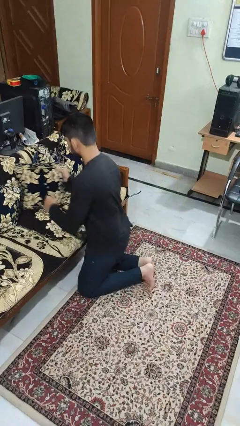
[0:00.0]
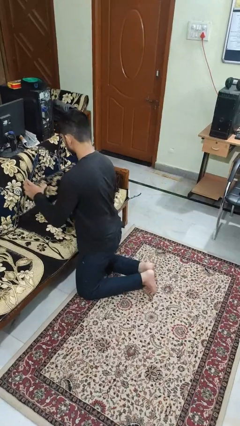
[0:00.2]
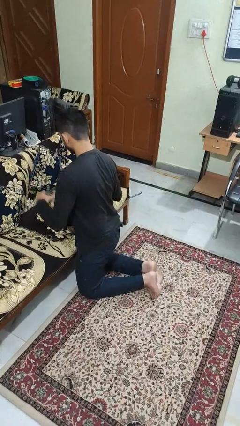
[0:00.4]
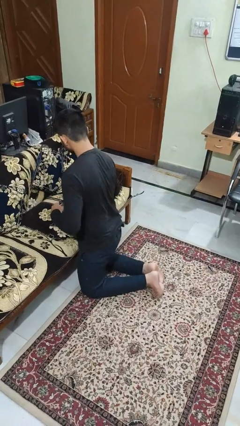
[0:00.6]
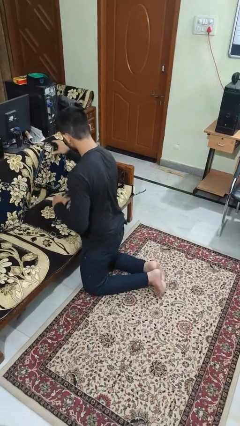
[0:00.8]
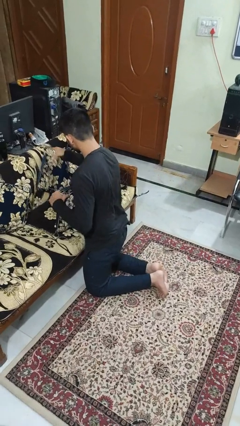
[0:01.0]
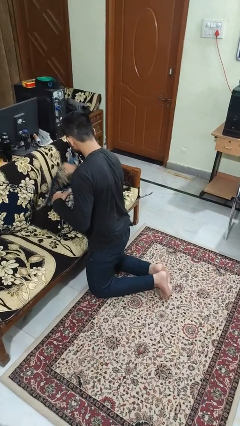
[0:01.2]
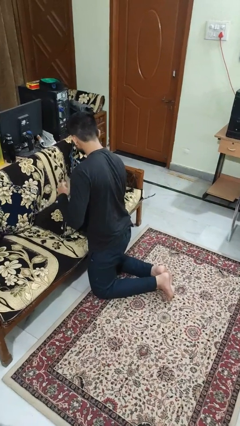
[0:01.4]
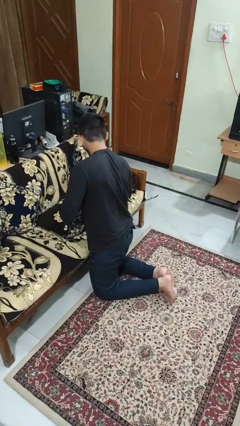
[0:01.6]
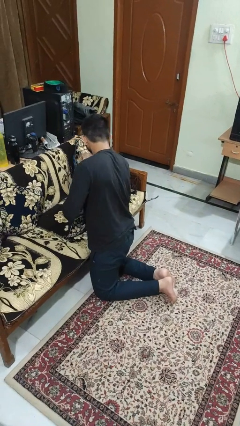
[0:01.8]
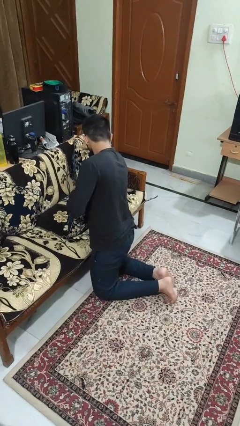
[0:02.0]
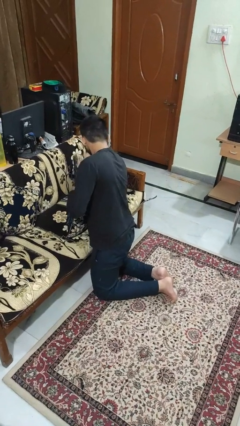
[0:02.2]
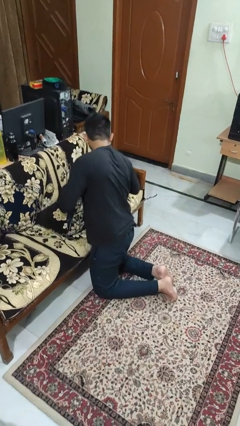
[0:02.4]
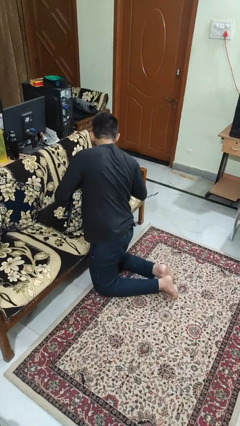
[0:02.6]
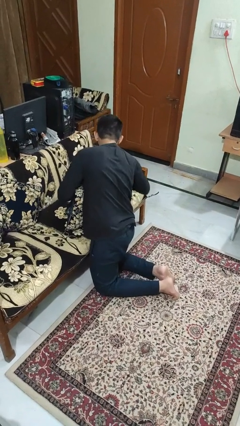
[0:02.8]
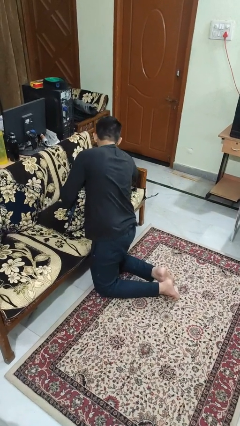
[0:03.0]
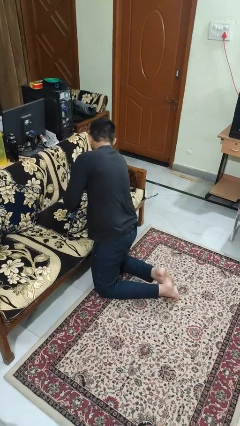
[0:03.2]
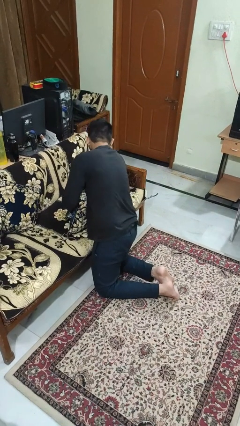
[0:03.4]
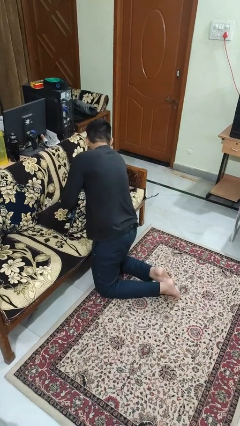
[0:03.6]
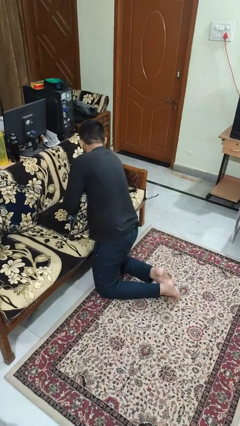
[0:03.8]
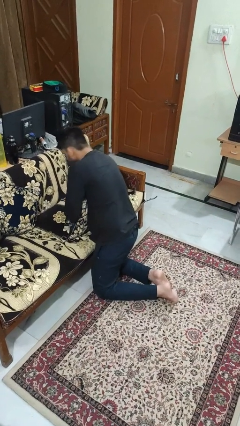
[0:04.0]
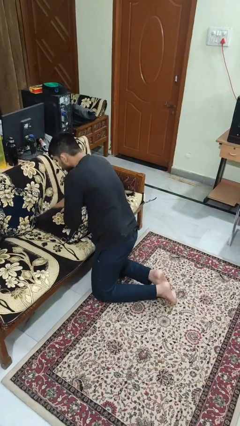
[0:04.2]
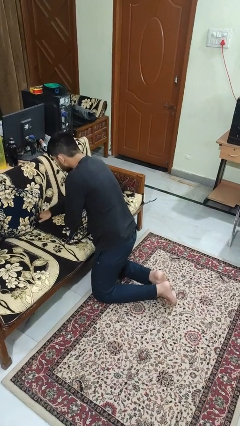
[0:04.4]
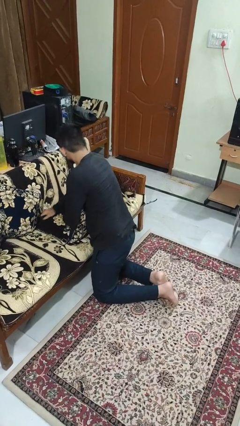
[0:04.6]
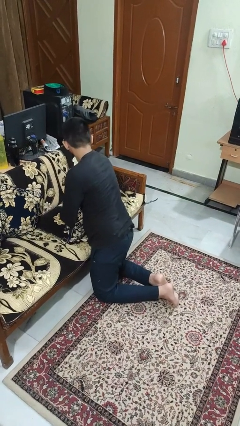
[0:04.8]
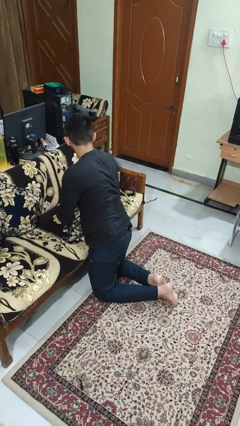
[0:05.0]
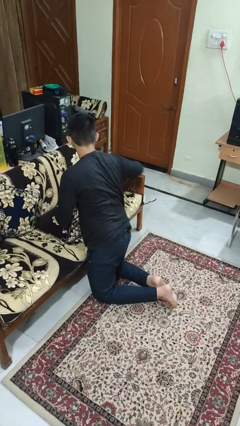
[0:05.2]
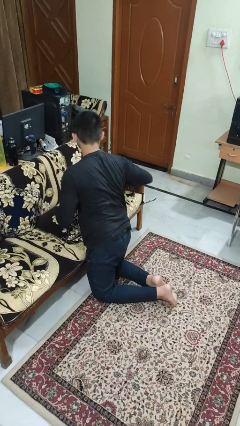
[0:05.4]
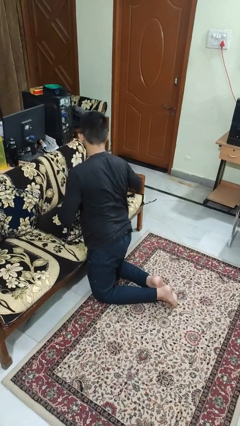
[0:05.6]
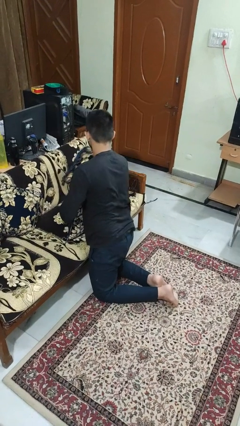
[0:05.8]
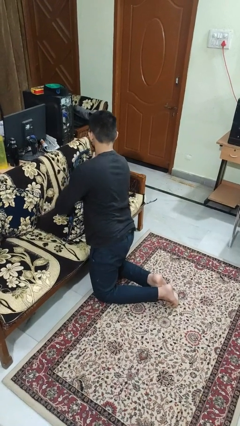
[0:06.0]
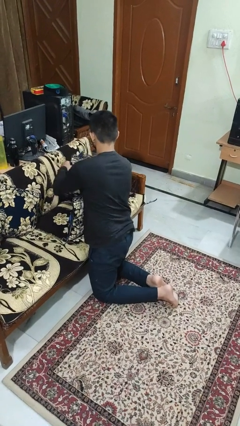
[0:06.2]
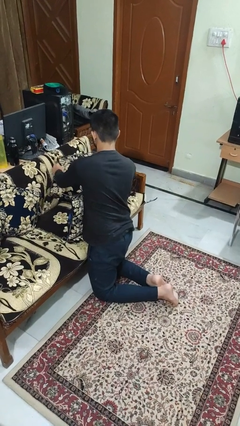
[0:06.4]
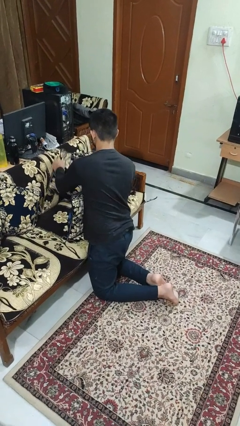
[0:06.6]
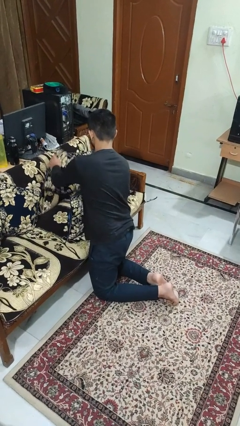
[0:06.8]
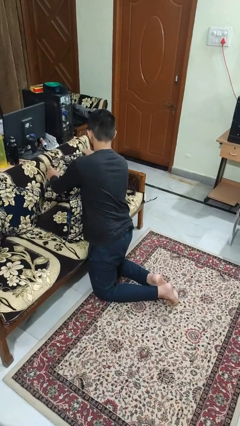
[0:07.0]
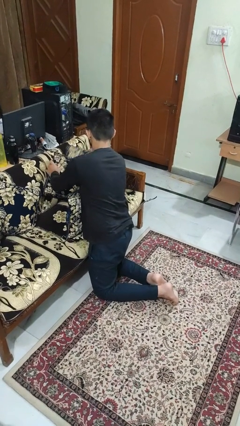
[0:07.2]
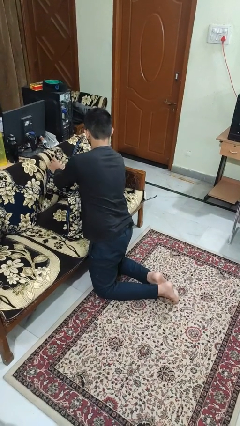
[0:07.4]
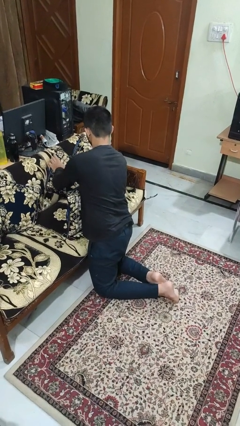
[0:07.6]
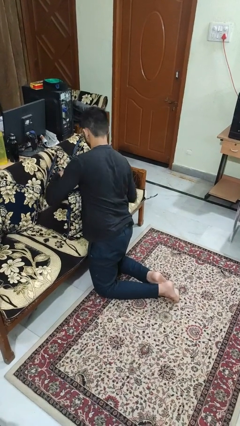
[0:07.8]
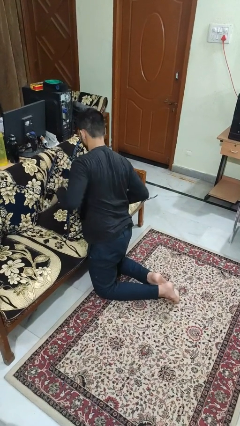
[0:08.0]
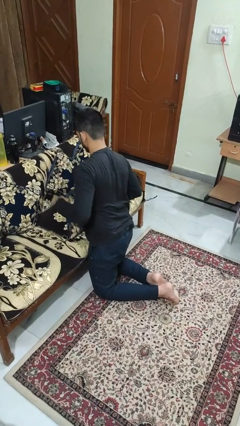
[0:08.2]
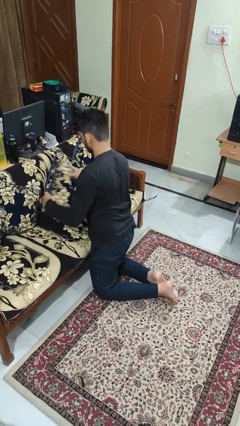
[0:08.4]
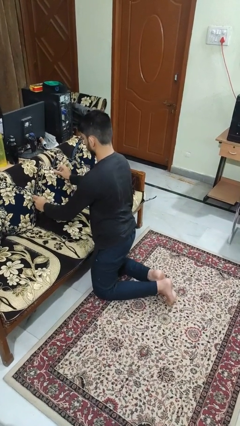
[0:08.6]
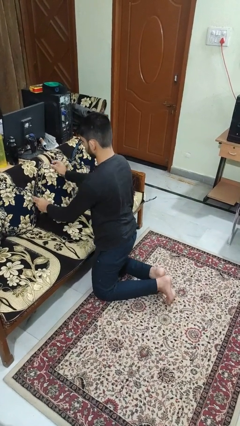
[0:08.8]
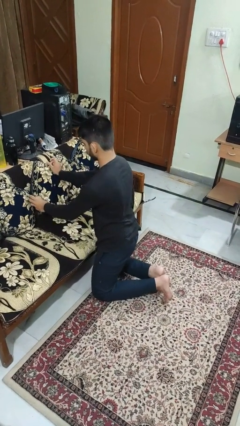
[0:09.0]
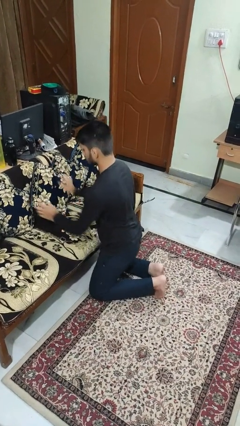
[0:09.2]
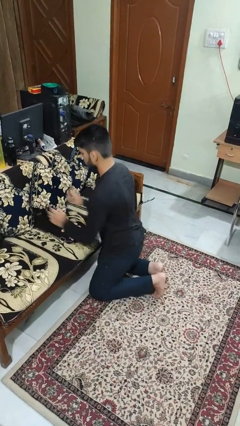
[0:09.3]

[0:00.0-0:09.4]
person searches in couch

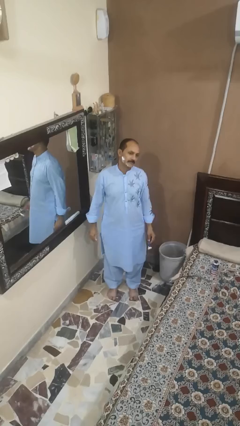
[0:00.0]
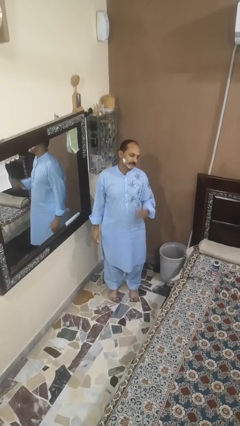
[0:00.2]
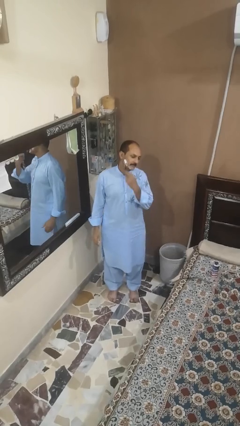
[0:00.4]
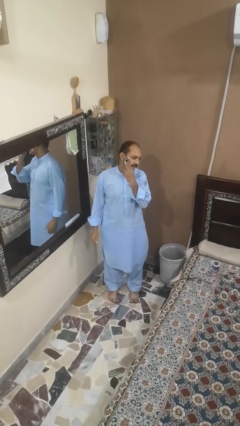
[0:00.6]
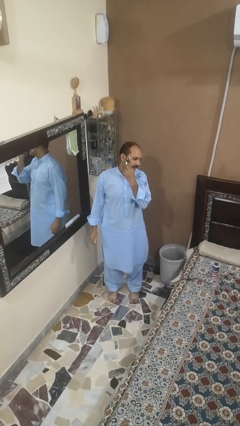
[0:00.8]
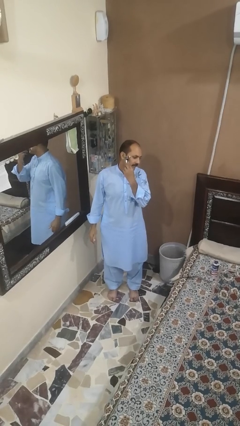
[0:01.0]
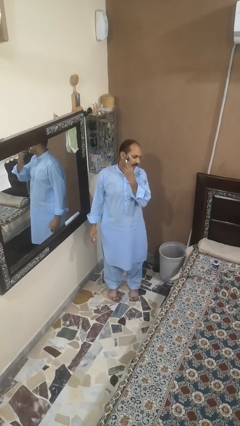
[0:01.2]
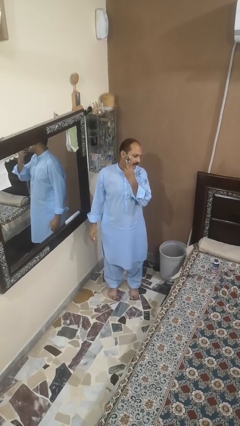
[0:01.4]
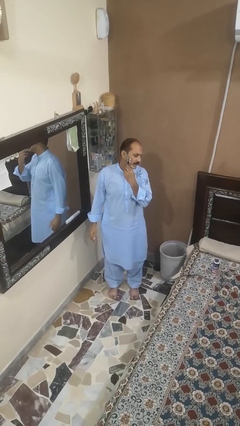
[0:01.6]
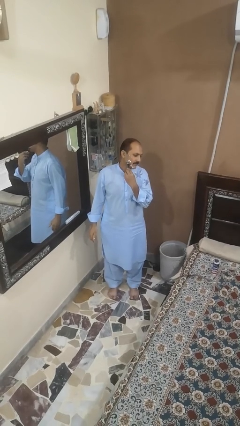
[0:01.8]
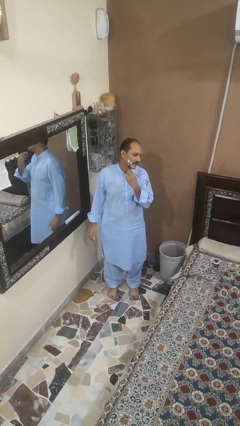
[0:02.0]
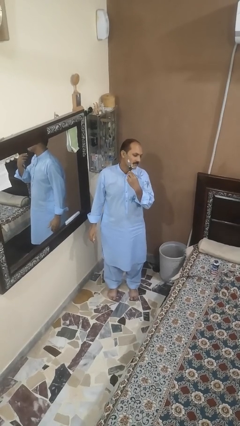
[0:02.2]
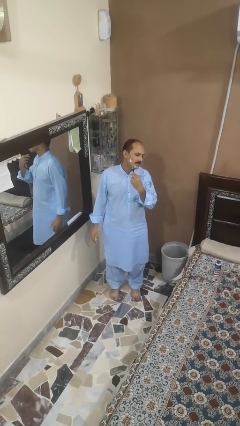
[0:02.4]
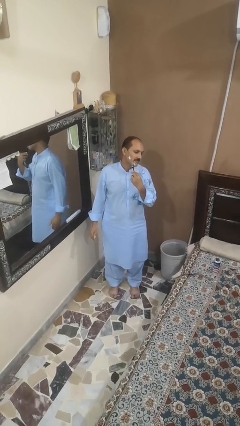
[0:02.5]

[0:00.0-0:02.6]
person shaves face

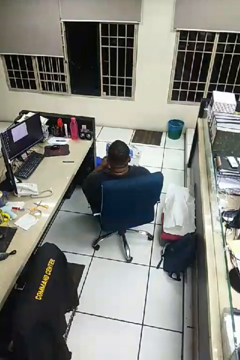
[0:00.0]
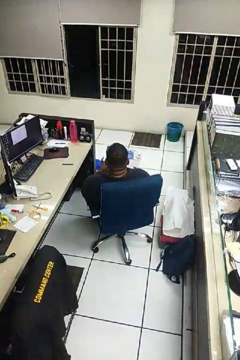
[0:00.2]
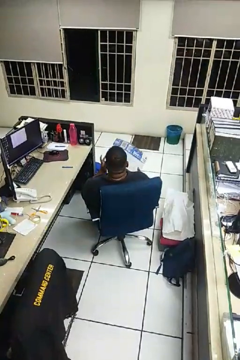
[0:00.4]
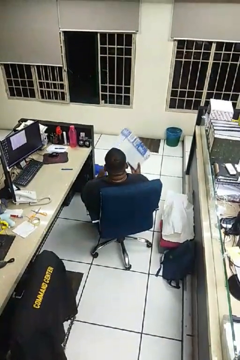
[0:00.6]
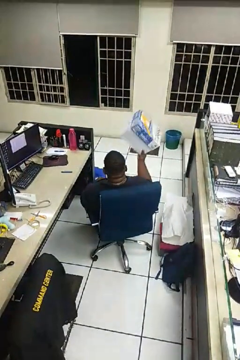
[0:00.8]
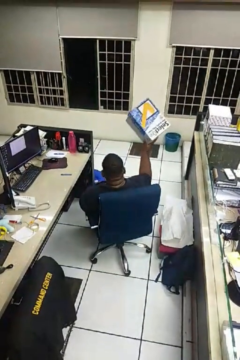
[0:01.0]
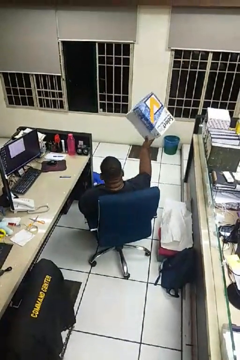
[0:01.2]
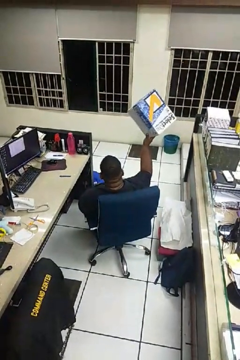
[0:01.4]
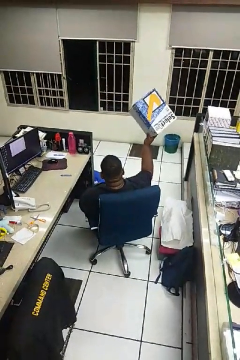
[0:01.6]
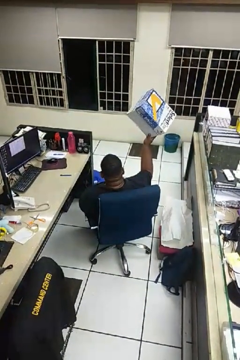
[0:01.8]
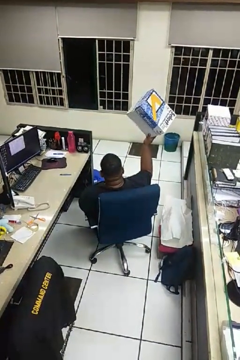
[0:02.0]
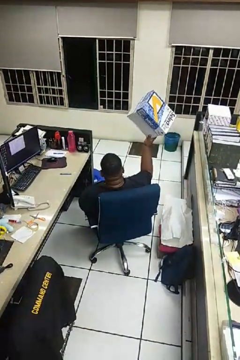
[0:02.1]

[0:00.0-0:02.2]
person holds object above head

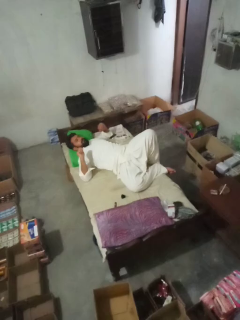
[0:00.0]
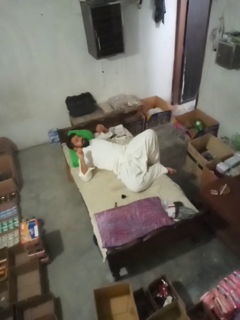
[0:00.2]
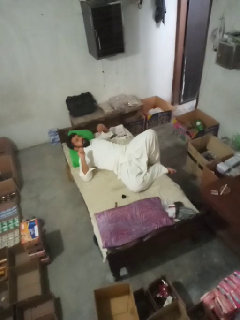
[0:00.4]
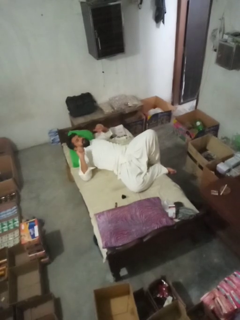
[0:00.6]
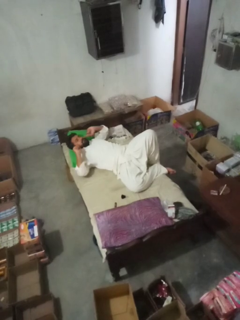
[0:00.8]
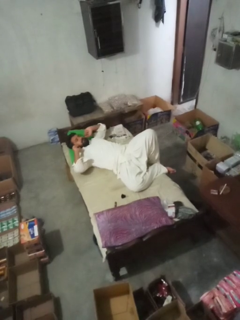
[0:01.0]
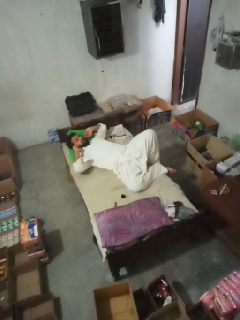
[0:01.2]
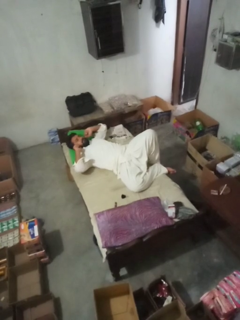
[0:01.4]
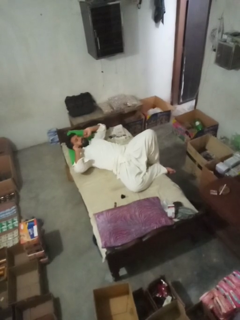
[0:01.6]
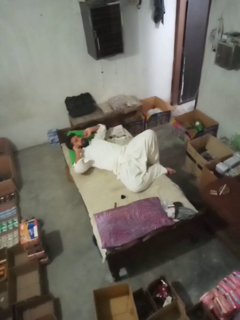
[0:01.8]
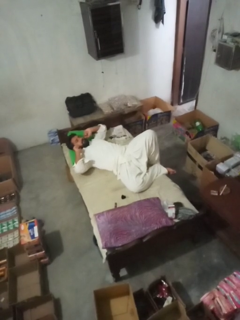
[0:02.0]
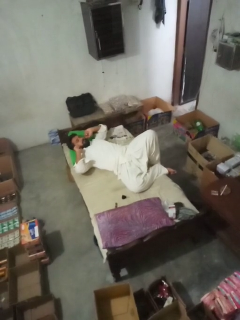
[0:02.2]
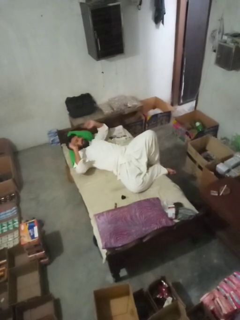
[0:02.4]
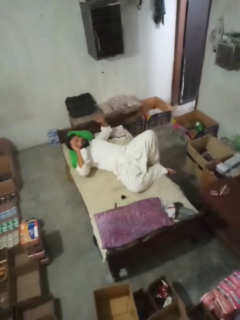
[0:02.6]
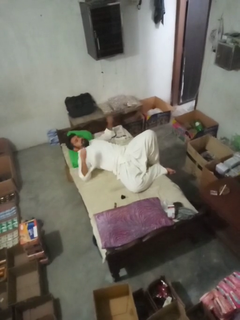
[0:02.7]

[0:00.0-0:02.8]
person puts fingers in ear

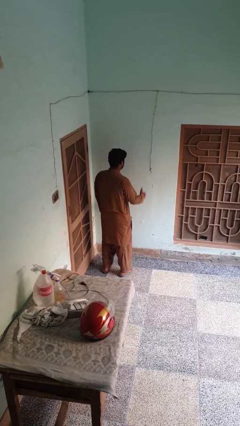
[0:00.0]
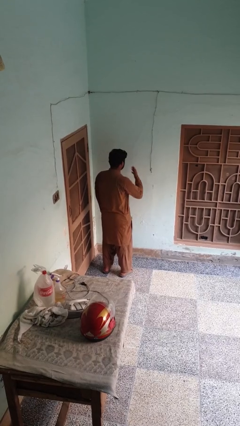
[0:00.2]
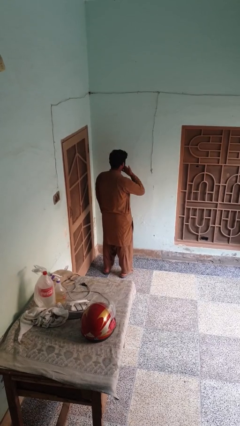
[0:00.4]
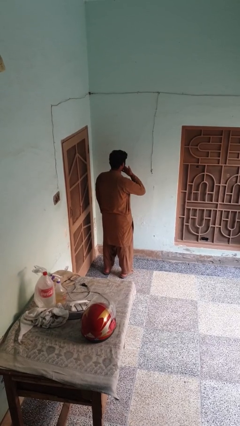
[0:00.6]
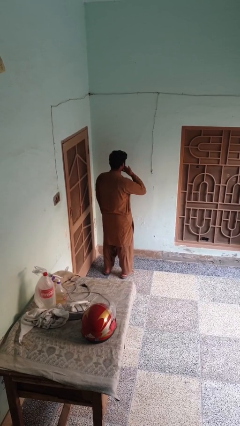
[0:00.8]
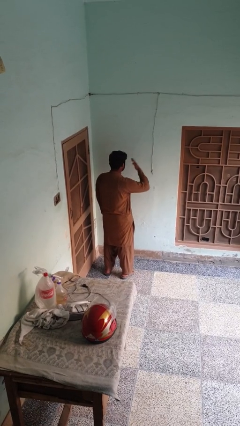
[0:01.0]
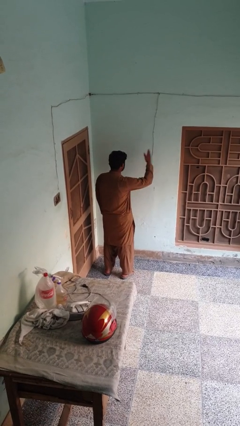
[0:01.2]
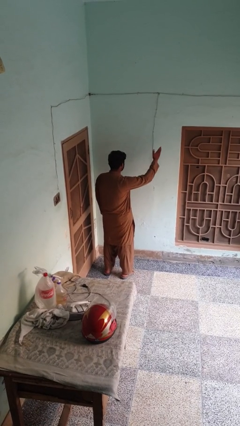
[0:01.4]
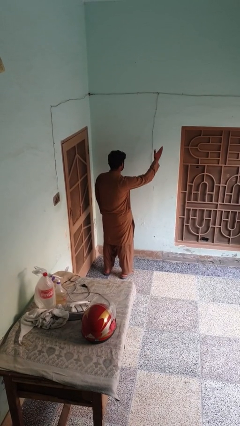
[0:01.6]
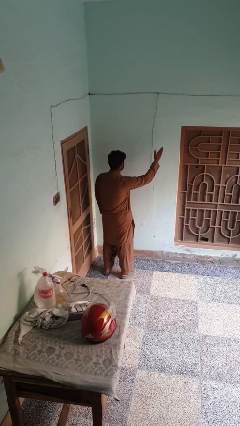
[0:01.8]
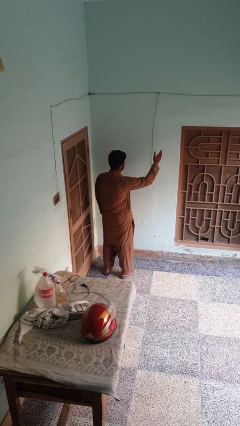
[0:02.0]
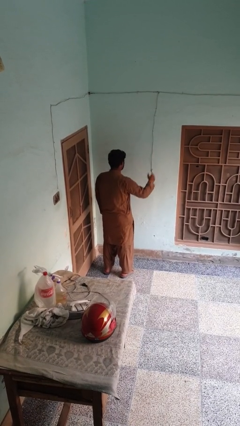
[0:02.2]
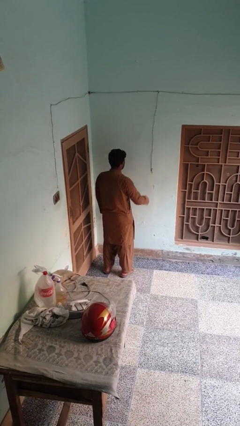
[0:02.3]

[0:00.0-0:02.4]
person gestures blow kiss
